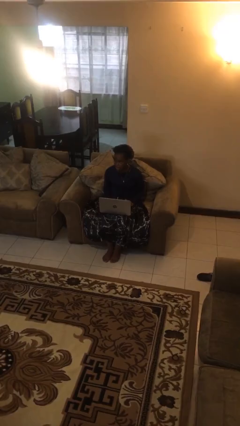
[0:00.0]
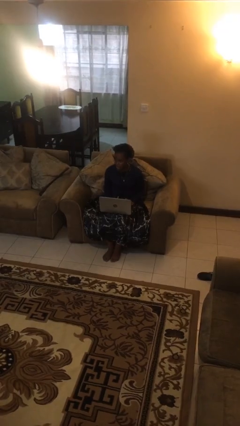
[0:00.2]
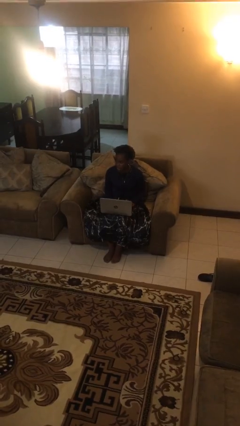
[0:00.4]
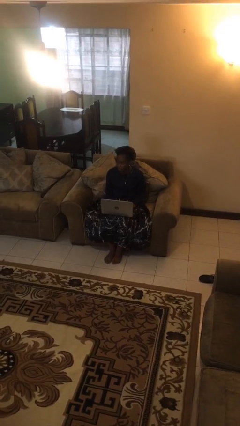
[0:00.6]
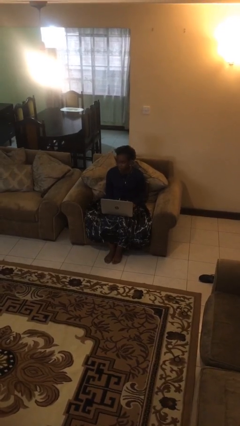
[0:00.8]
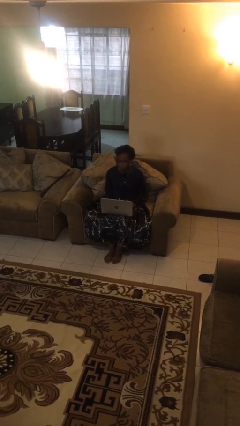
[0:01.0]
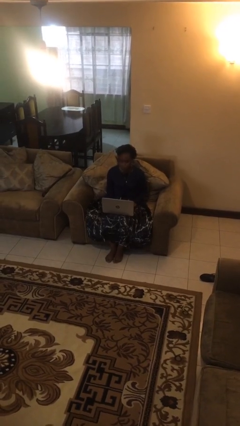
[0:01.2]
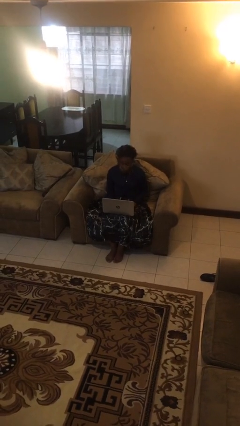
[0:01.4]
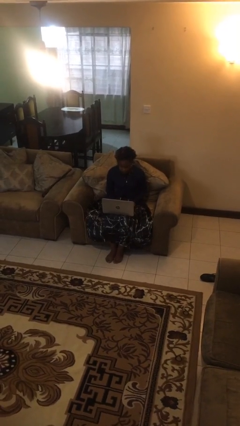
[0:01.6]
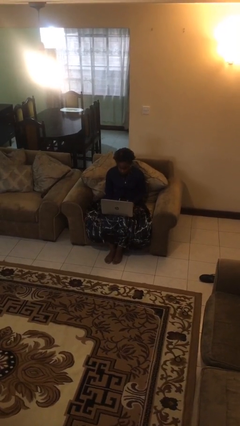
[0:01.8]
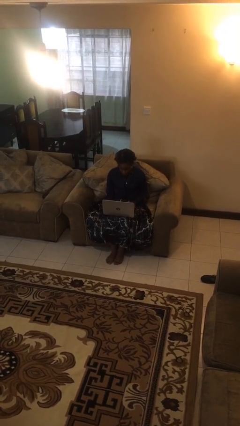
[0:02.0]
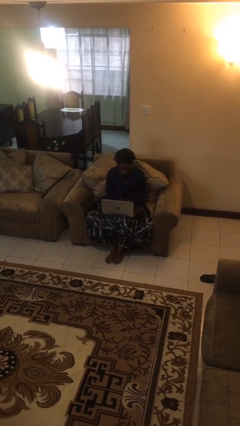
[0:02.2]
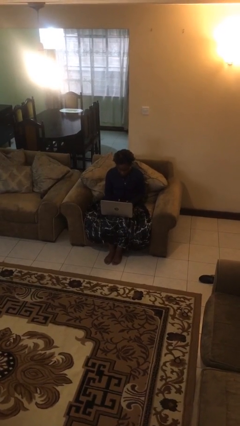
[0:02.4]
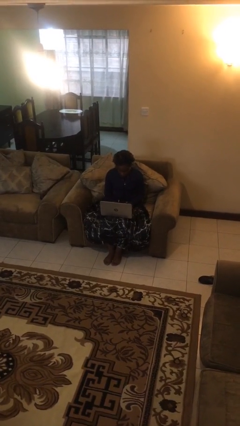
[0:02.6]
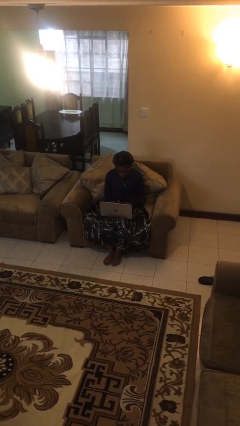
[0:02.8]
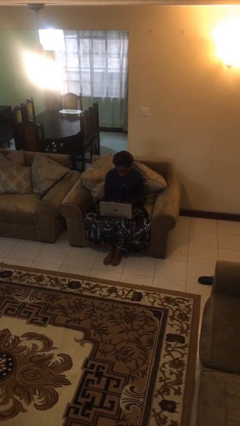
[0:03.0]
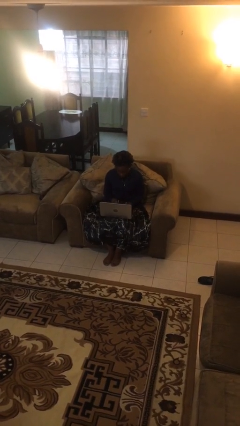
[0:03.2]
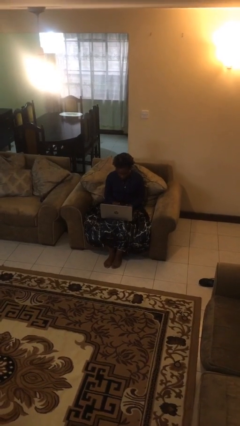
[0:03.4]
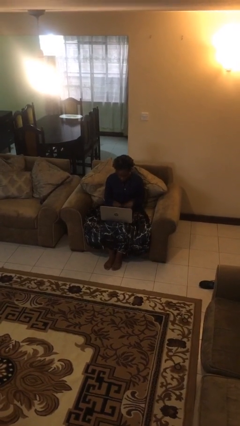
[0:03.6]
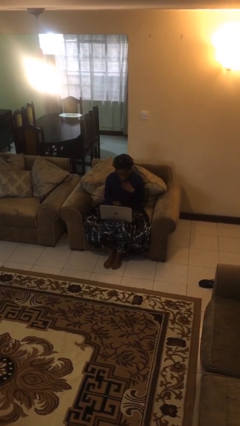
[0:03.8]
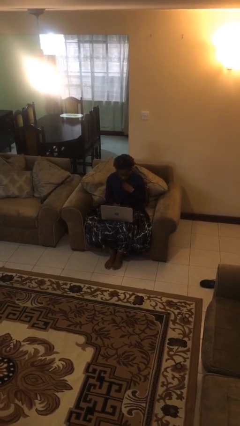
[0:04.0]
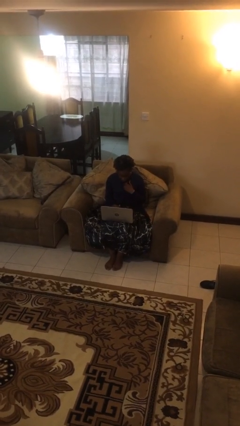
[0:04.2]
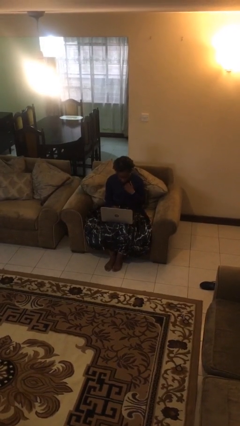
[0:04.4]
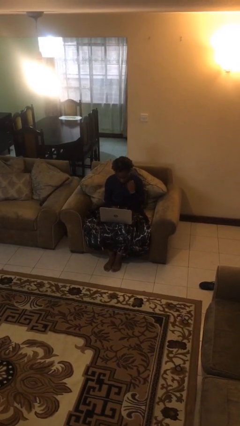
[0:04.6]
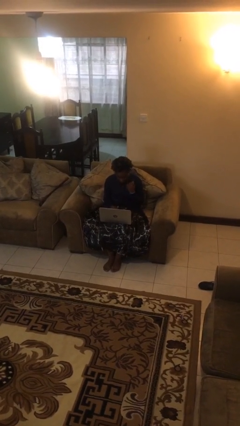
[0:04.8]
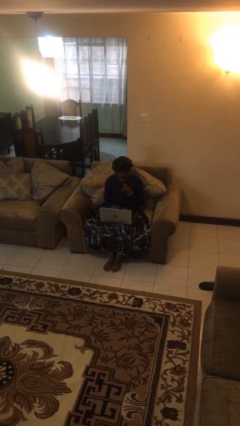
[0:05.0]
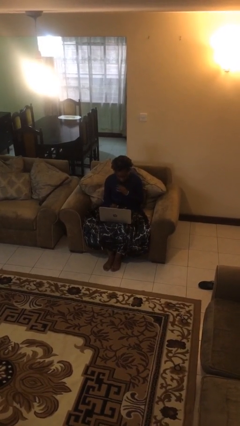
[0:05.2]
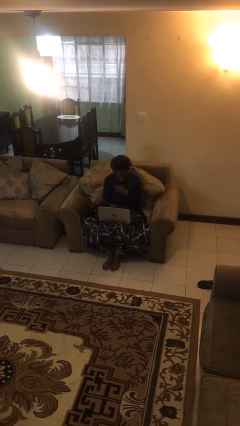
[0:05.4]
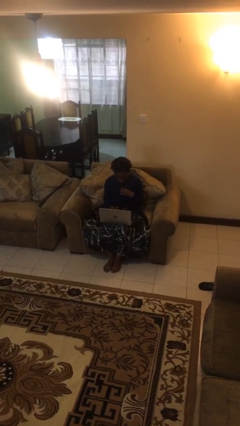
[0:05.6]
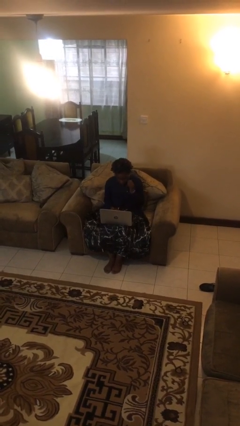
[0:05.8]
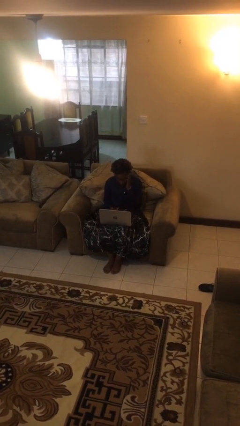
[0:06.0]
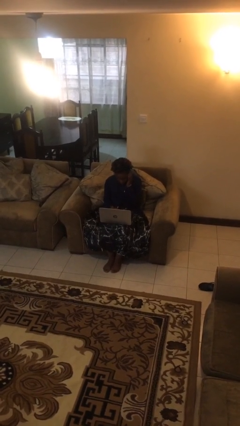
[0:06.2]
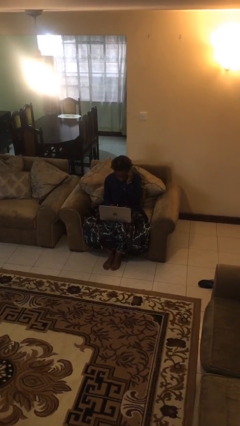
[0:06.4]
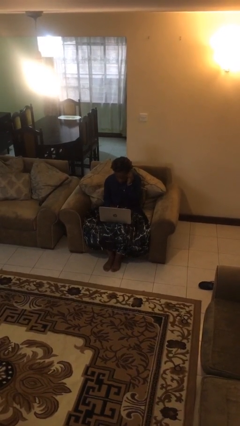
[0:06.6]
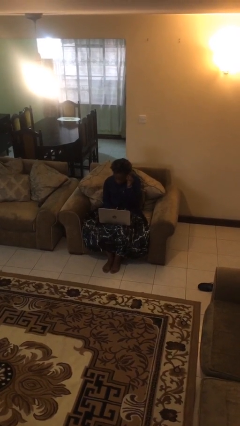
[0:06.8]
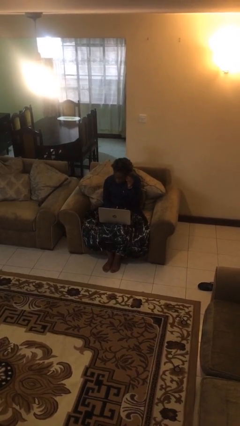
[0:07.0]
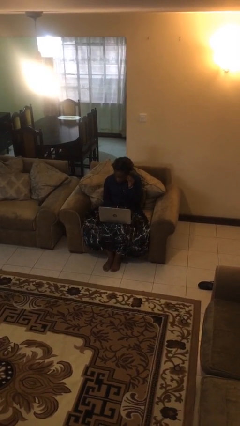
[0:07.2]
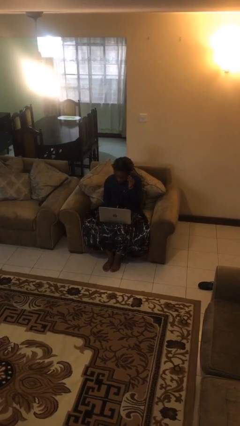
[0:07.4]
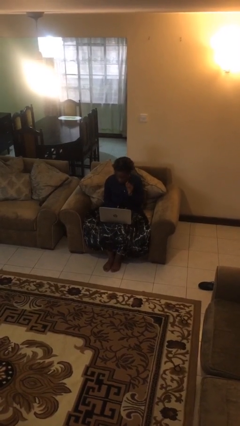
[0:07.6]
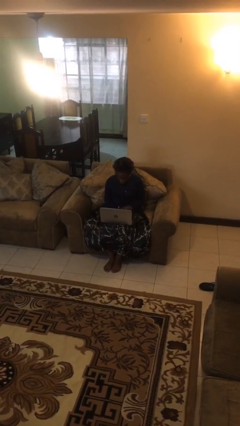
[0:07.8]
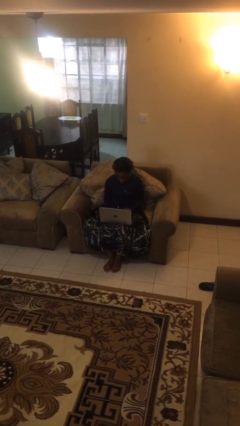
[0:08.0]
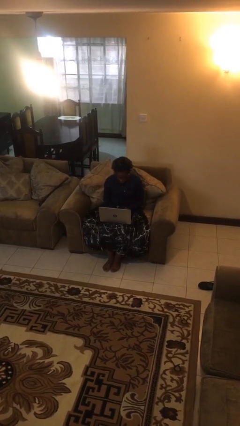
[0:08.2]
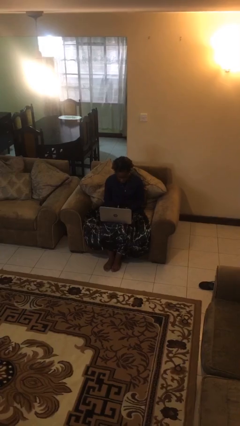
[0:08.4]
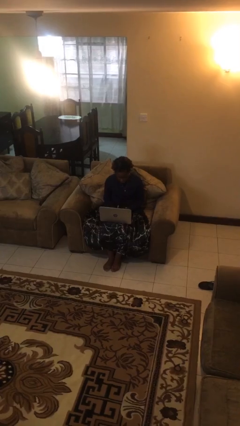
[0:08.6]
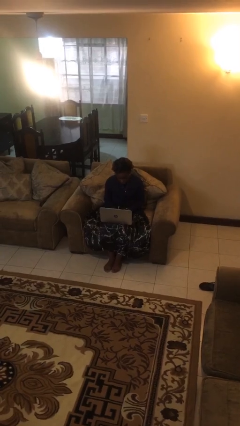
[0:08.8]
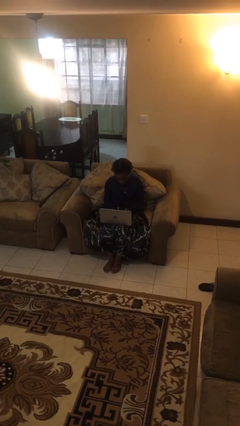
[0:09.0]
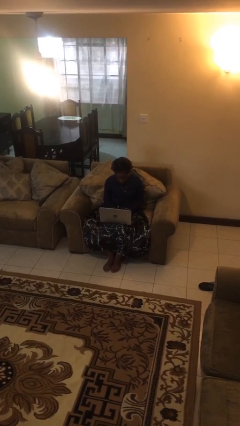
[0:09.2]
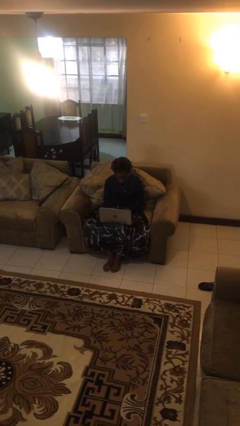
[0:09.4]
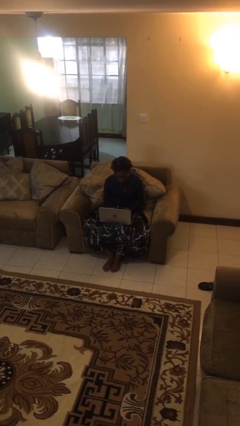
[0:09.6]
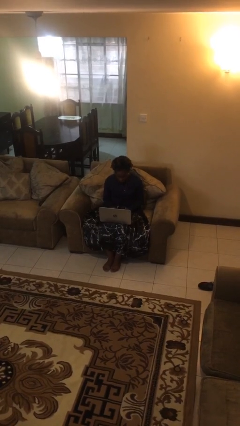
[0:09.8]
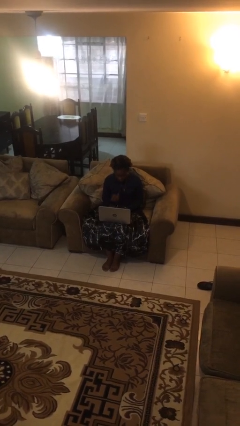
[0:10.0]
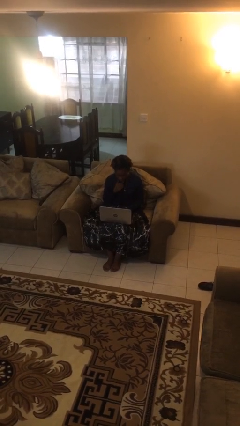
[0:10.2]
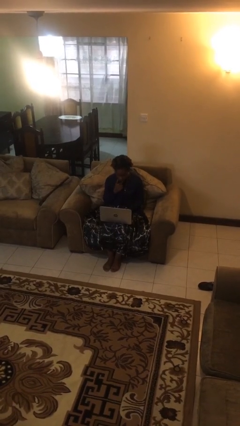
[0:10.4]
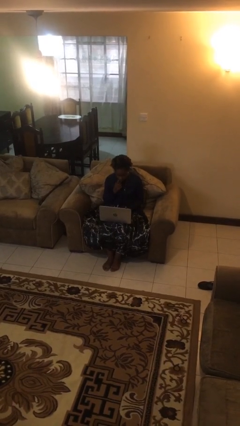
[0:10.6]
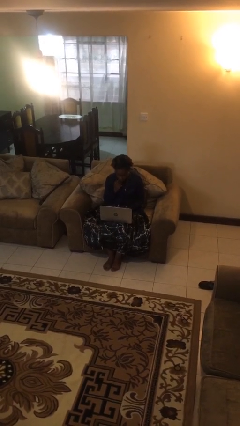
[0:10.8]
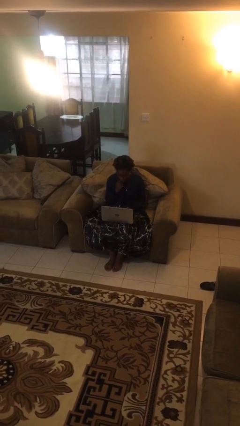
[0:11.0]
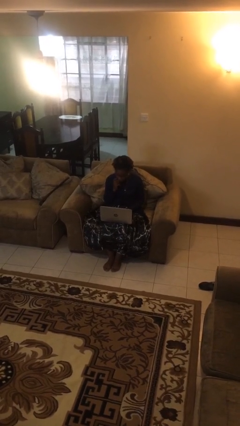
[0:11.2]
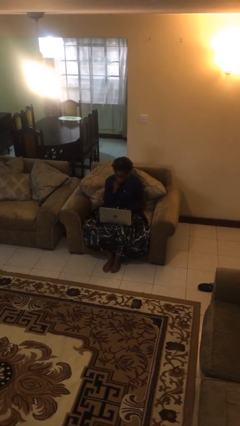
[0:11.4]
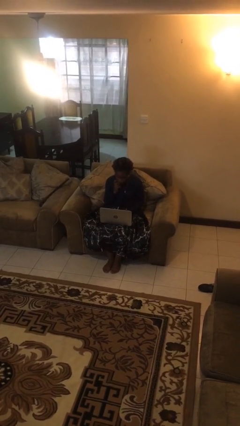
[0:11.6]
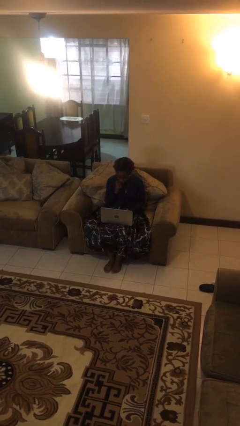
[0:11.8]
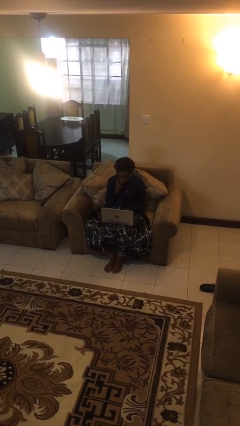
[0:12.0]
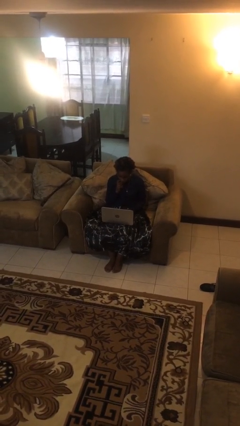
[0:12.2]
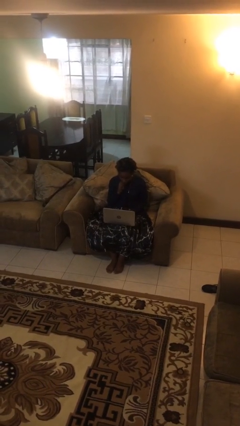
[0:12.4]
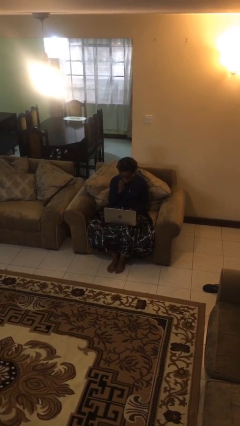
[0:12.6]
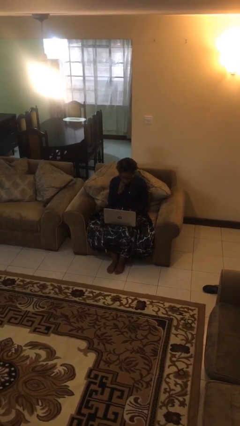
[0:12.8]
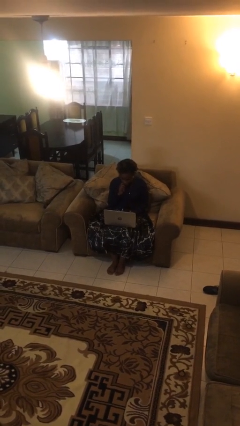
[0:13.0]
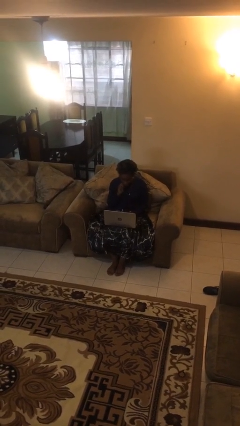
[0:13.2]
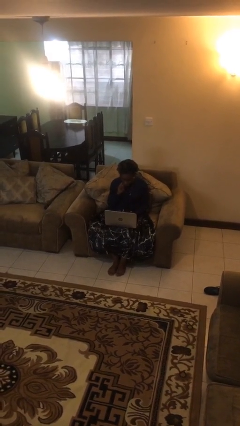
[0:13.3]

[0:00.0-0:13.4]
person interacts with laptop

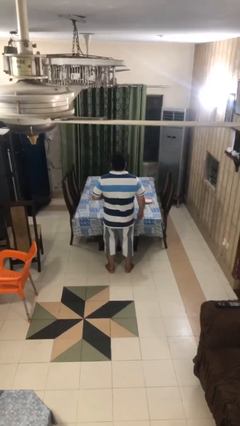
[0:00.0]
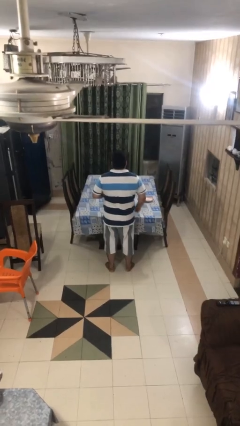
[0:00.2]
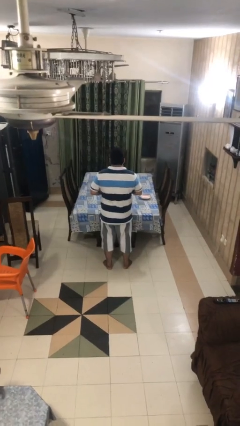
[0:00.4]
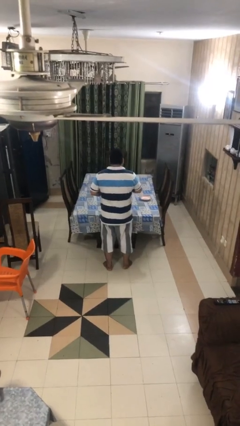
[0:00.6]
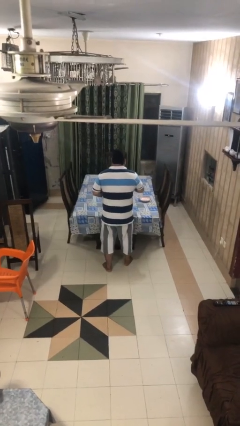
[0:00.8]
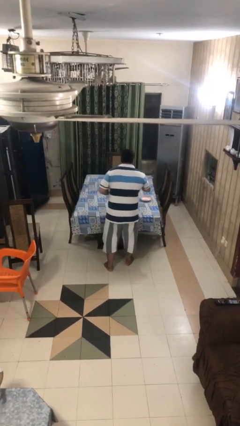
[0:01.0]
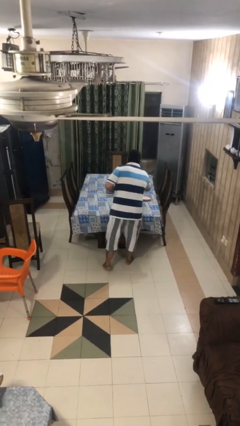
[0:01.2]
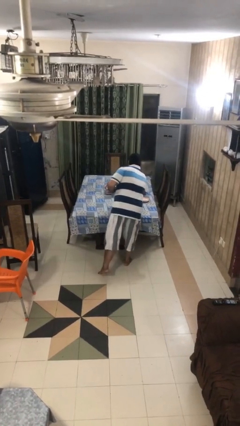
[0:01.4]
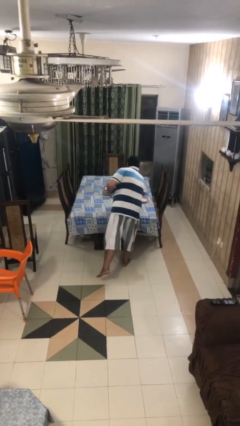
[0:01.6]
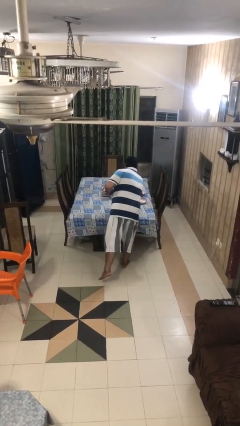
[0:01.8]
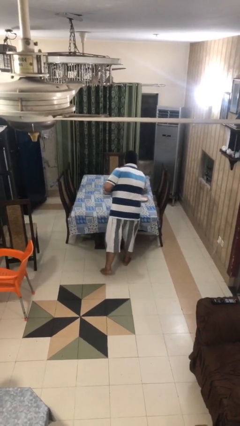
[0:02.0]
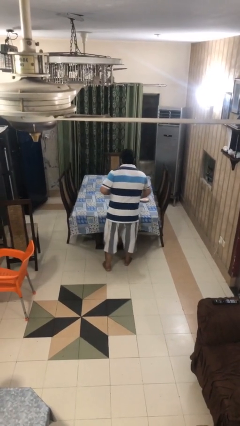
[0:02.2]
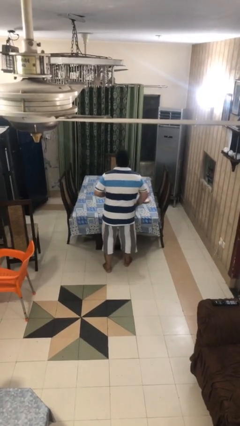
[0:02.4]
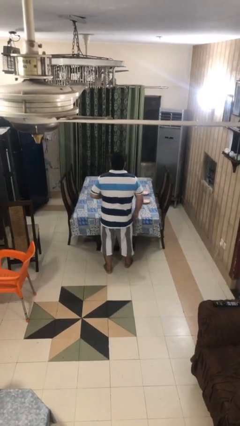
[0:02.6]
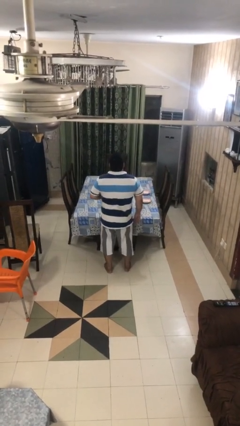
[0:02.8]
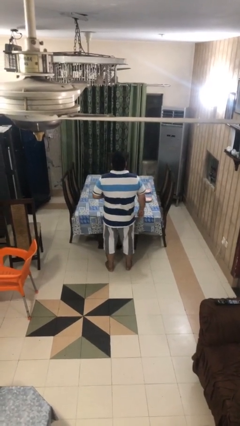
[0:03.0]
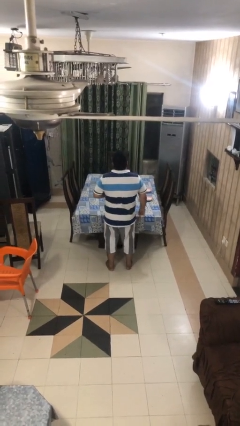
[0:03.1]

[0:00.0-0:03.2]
person sets table

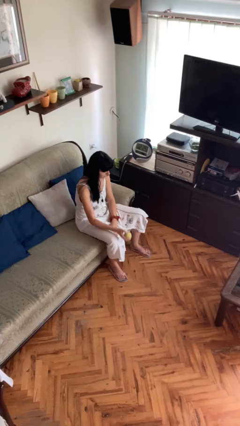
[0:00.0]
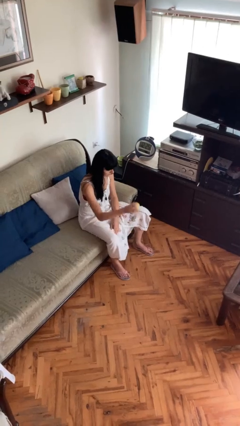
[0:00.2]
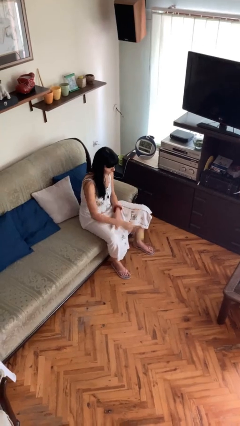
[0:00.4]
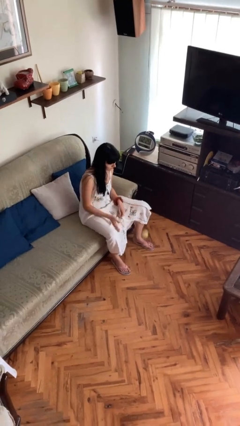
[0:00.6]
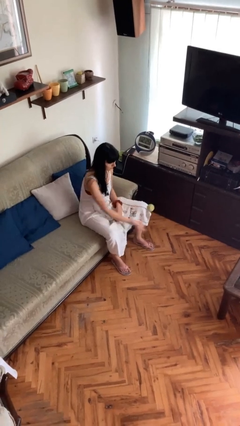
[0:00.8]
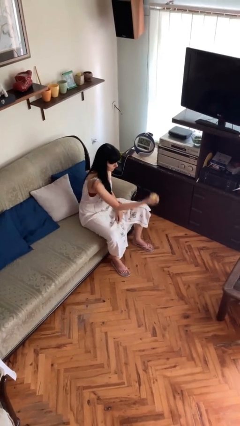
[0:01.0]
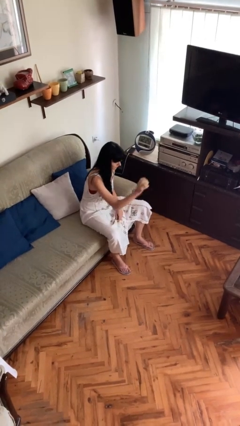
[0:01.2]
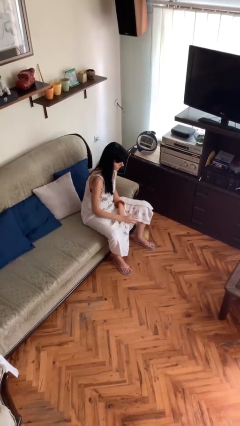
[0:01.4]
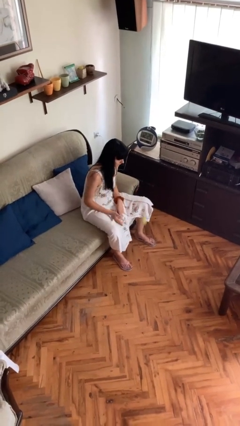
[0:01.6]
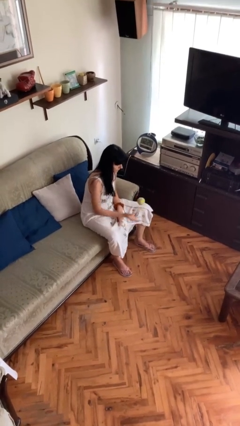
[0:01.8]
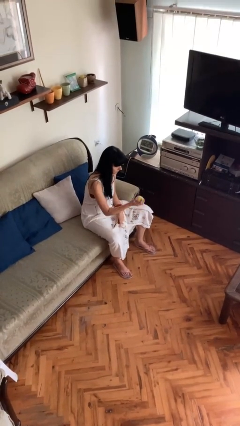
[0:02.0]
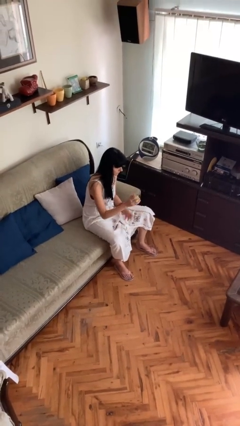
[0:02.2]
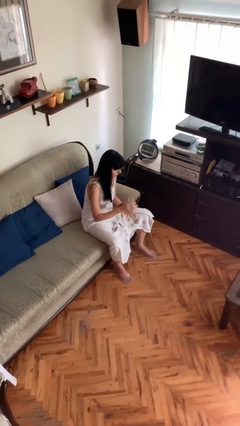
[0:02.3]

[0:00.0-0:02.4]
person bounces ball on floor
